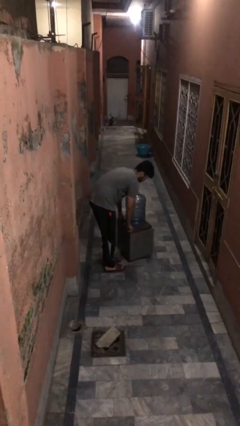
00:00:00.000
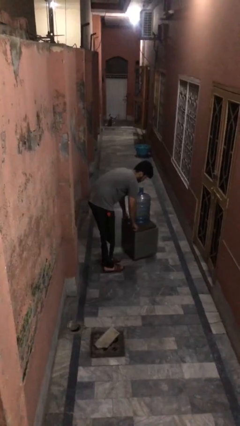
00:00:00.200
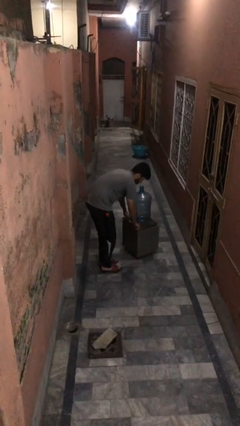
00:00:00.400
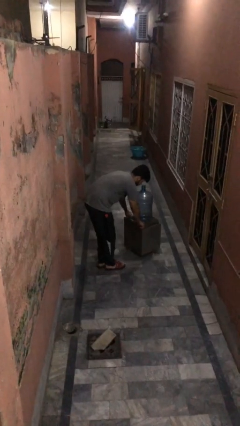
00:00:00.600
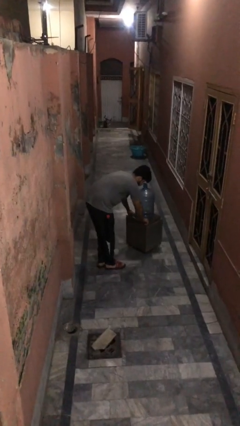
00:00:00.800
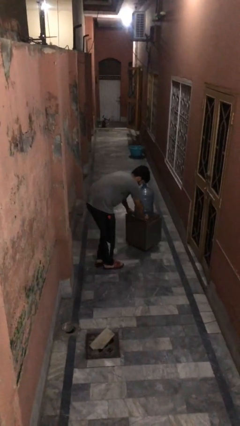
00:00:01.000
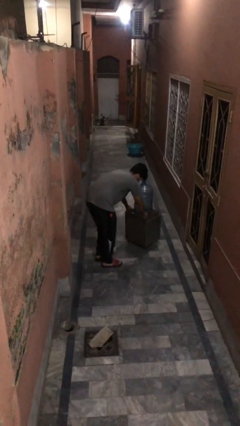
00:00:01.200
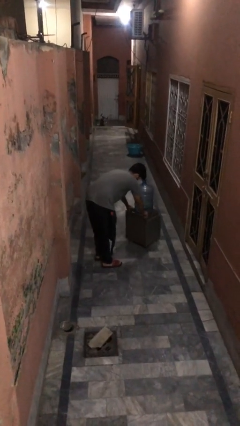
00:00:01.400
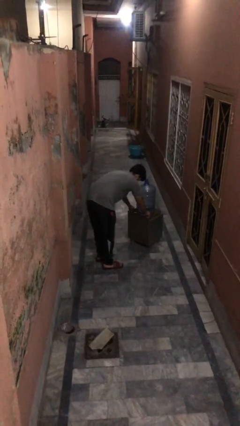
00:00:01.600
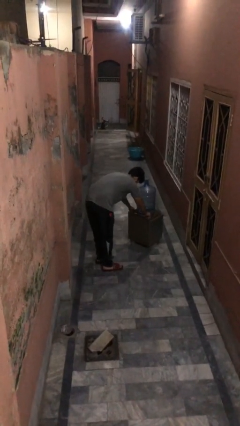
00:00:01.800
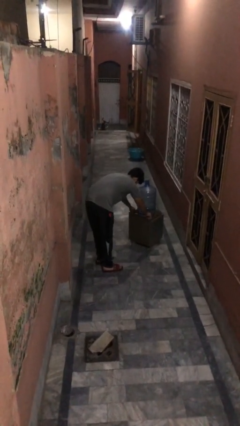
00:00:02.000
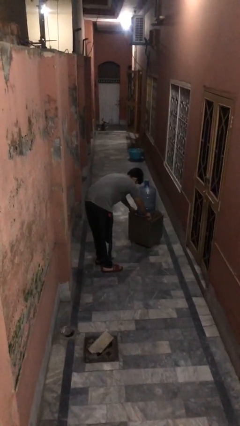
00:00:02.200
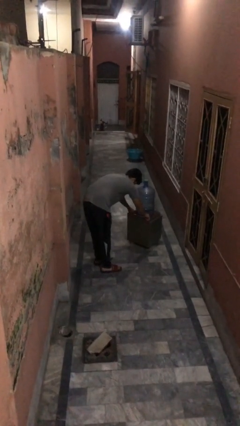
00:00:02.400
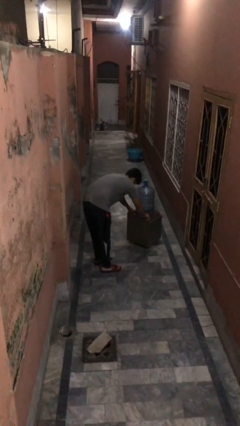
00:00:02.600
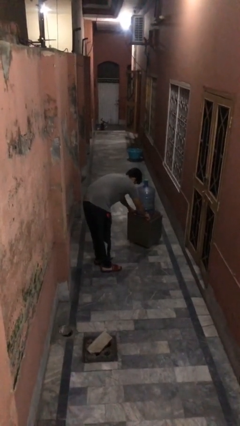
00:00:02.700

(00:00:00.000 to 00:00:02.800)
person pushes wheeled cart

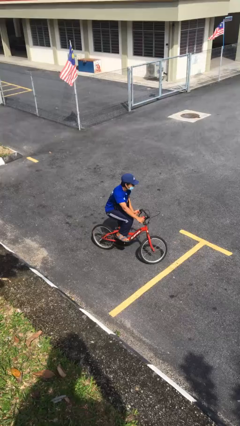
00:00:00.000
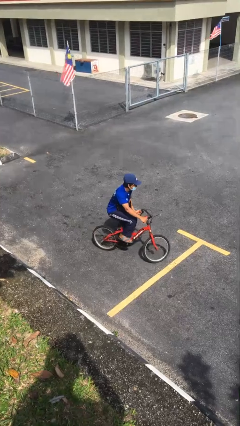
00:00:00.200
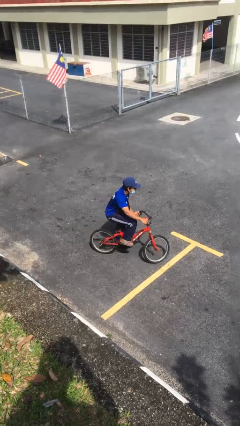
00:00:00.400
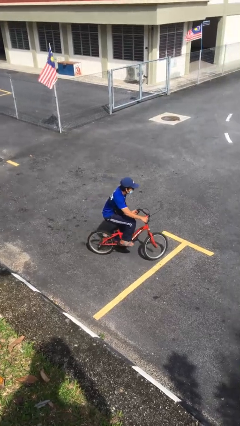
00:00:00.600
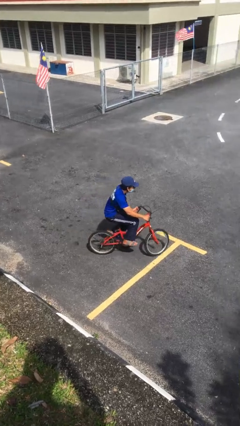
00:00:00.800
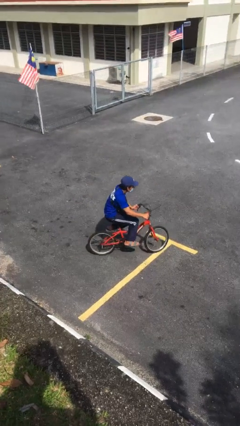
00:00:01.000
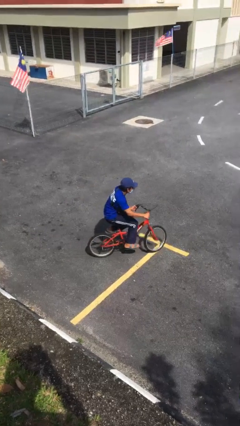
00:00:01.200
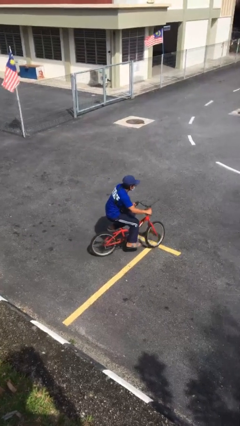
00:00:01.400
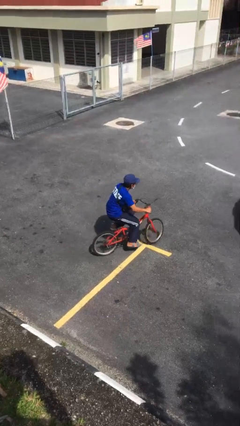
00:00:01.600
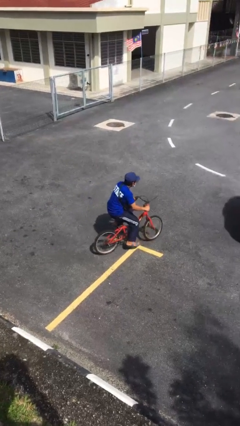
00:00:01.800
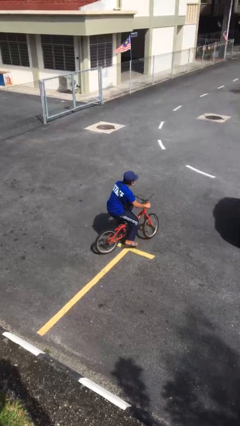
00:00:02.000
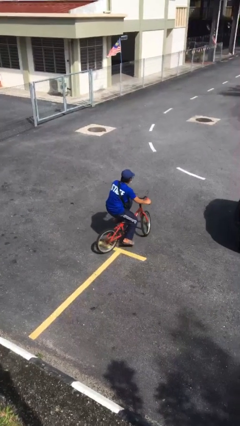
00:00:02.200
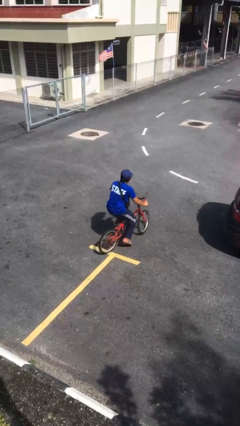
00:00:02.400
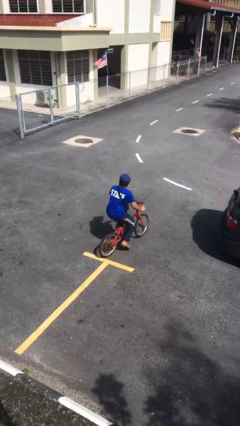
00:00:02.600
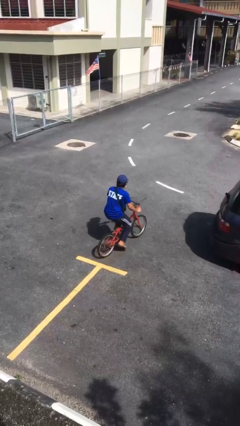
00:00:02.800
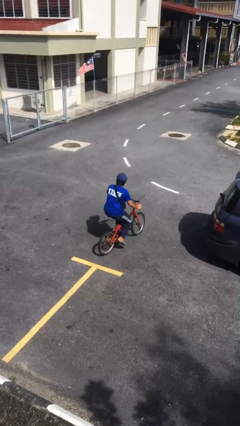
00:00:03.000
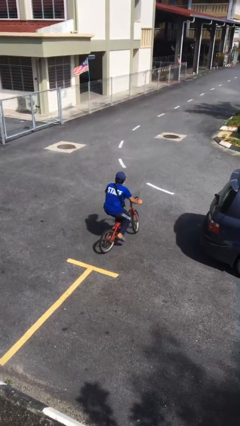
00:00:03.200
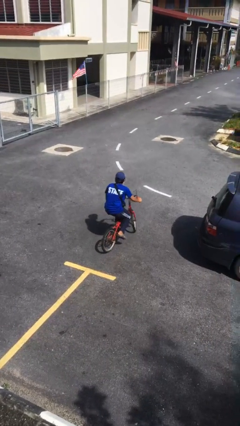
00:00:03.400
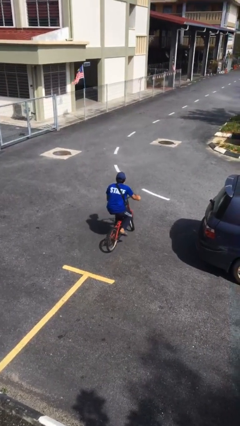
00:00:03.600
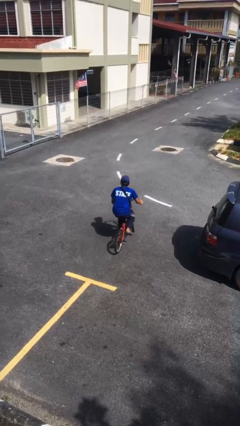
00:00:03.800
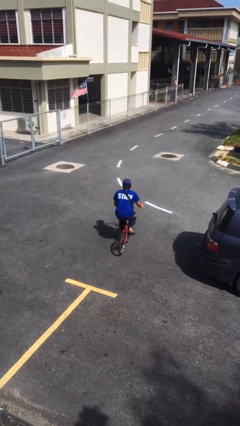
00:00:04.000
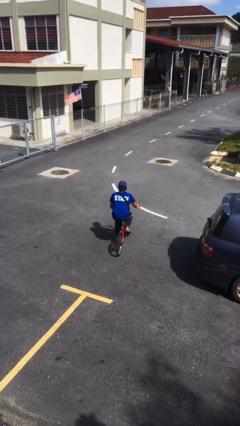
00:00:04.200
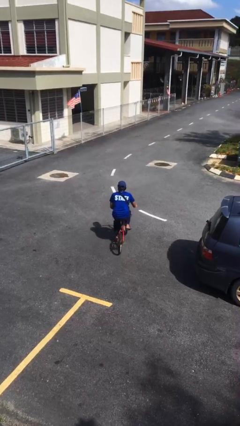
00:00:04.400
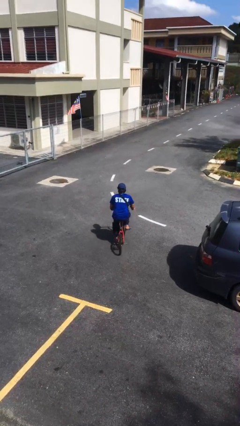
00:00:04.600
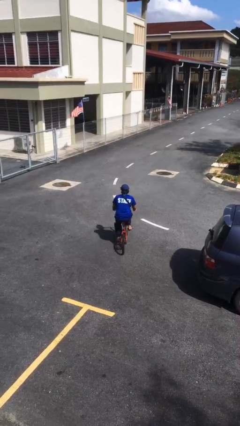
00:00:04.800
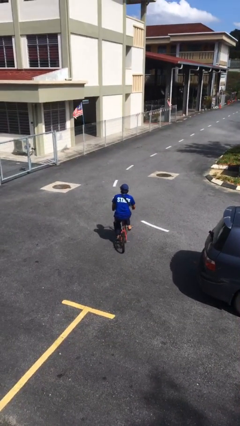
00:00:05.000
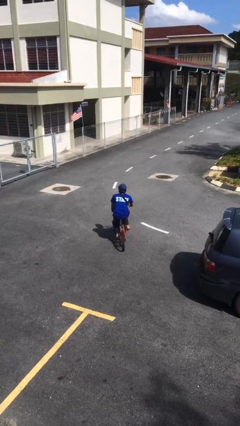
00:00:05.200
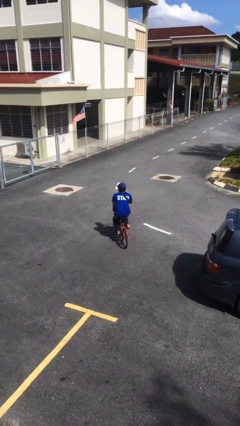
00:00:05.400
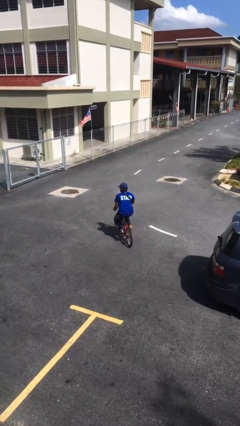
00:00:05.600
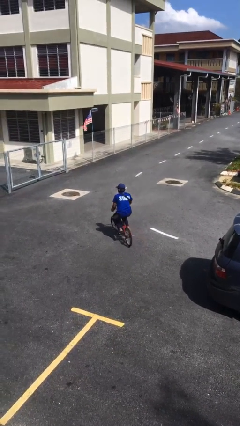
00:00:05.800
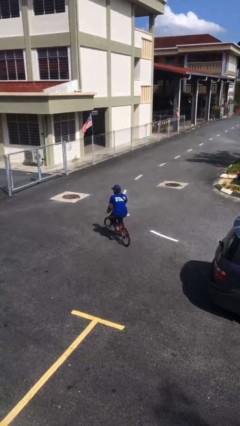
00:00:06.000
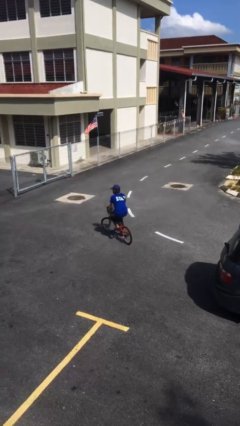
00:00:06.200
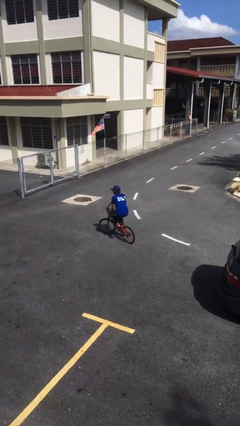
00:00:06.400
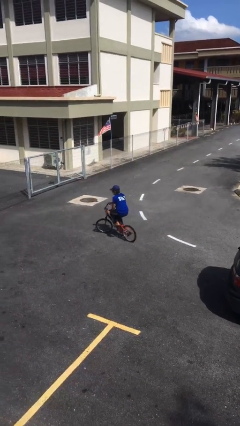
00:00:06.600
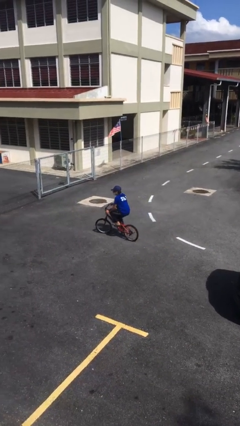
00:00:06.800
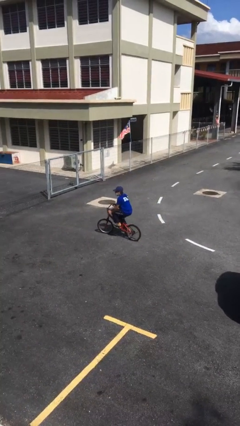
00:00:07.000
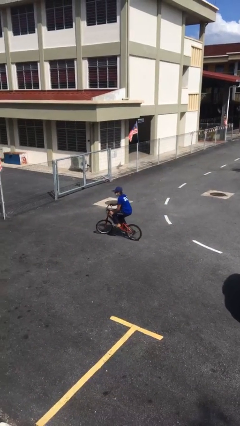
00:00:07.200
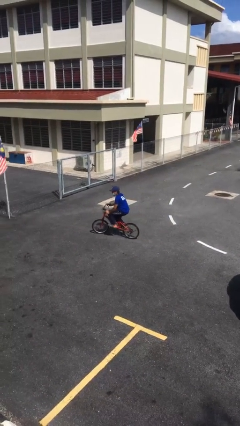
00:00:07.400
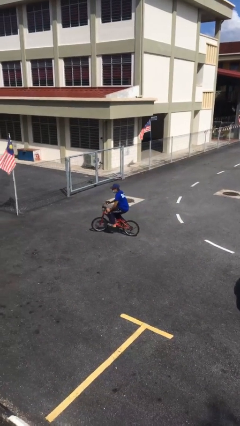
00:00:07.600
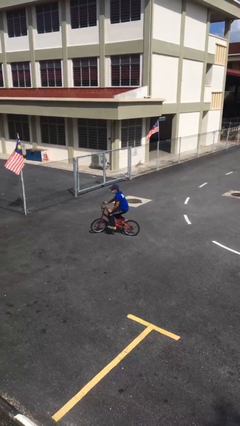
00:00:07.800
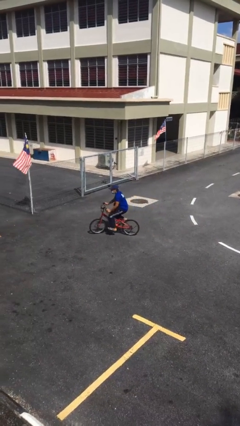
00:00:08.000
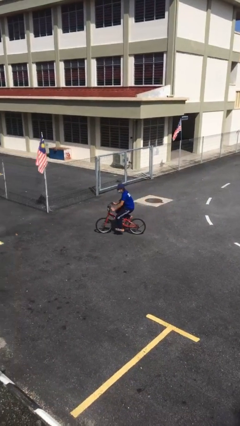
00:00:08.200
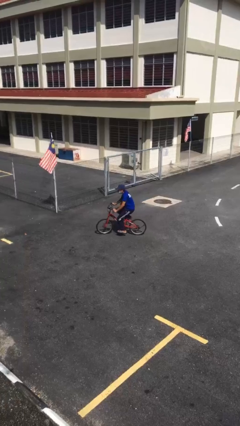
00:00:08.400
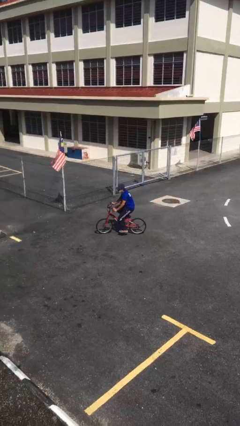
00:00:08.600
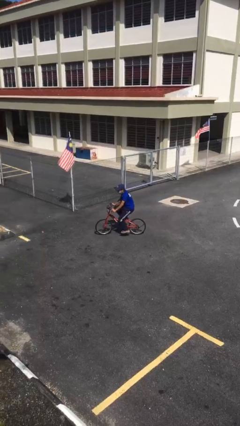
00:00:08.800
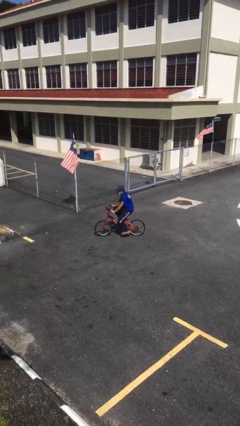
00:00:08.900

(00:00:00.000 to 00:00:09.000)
person rides bicycle

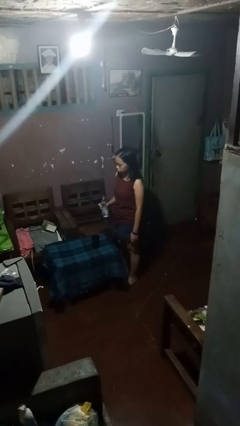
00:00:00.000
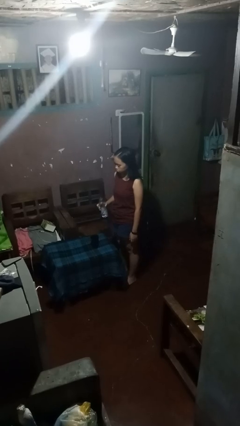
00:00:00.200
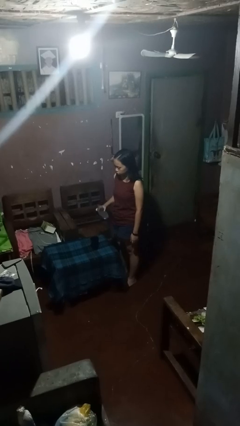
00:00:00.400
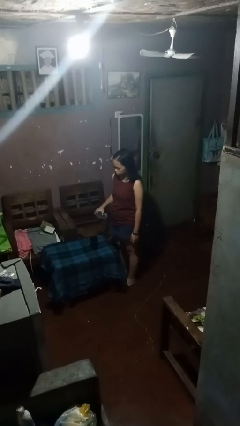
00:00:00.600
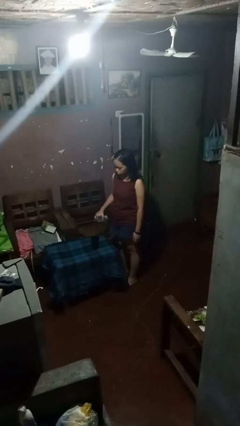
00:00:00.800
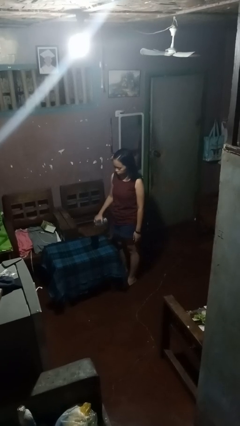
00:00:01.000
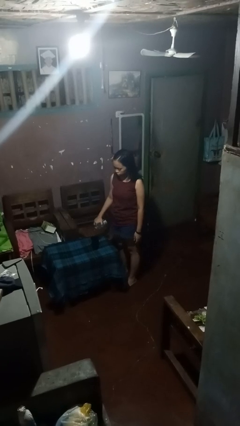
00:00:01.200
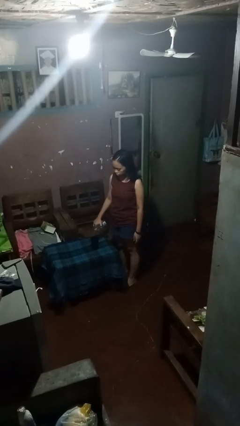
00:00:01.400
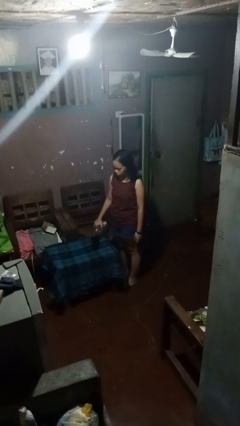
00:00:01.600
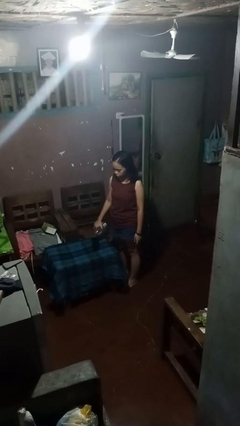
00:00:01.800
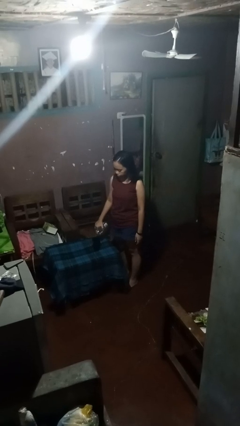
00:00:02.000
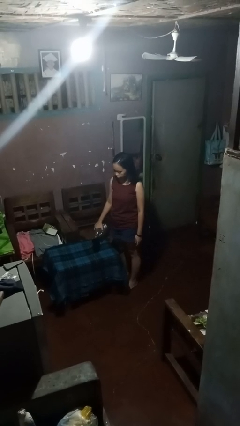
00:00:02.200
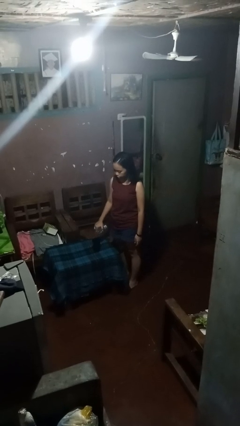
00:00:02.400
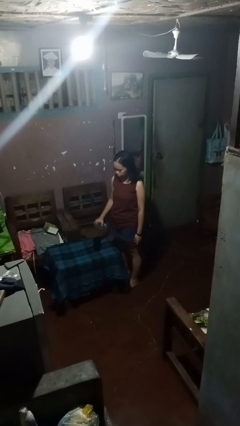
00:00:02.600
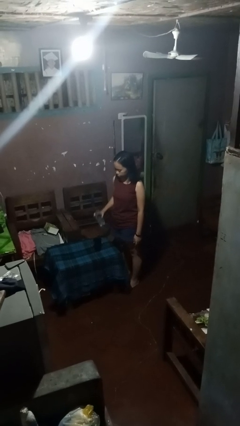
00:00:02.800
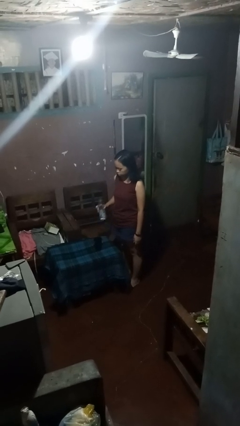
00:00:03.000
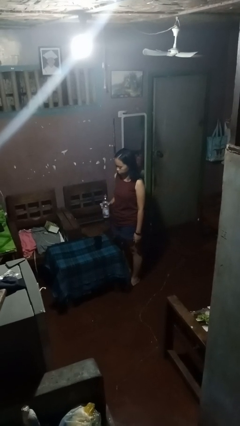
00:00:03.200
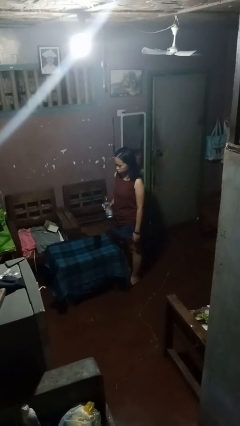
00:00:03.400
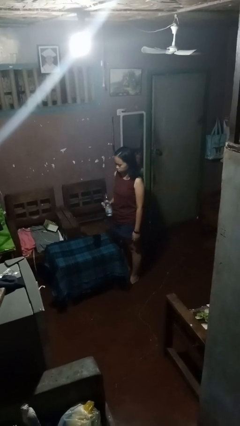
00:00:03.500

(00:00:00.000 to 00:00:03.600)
person pours liquid into cup

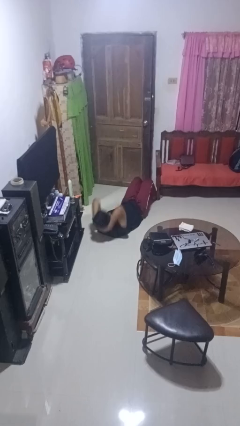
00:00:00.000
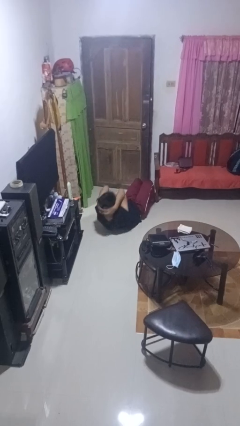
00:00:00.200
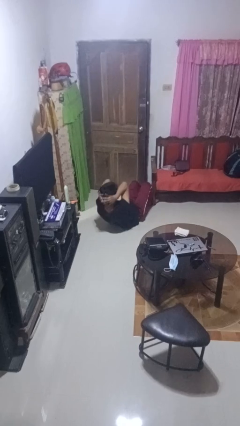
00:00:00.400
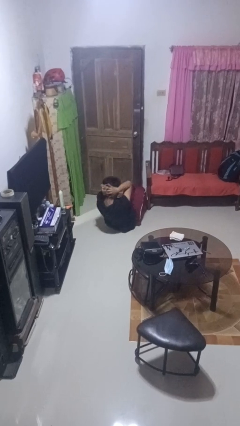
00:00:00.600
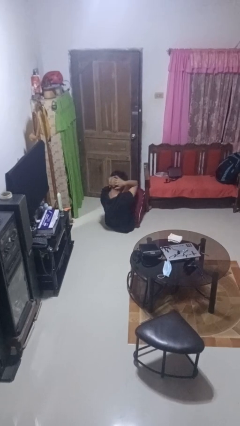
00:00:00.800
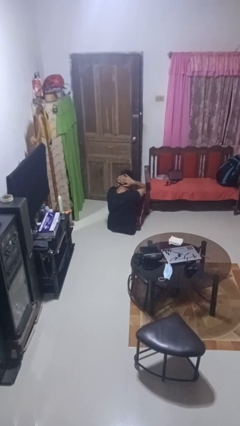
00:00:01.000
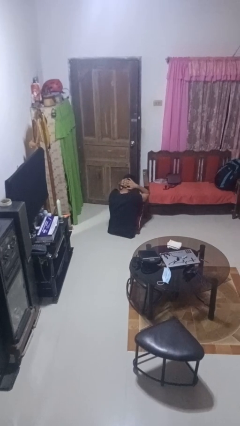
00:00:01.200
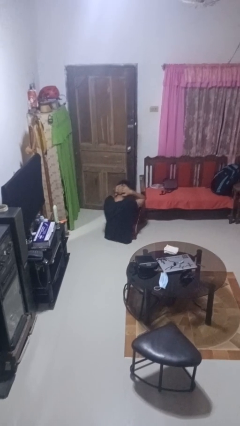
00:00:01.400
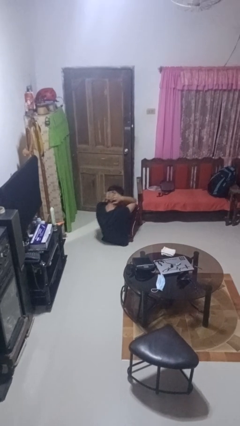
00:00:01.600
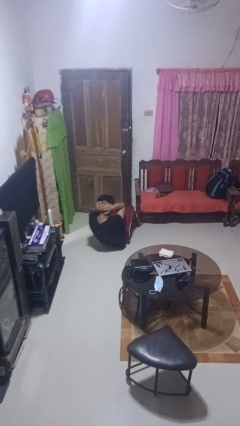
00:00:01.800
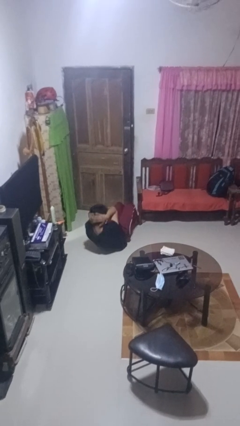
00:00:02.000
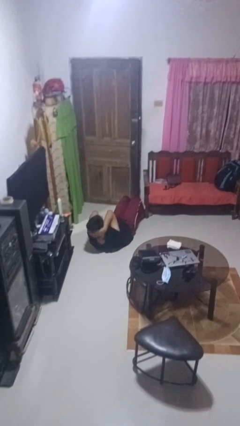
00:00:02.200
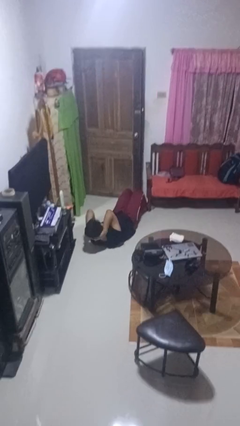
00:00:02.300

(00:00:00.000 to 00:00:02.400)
person exercises with situp
